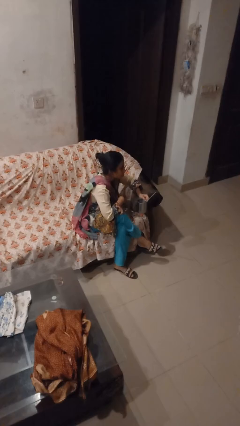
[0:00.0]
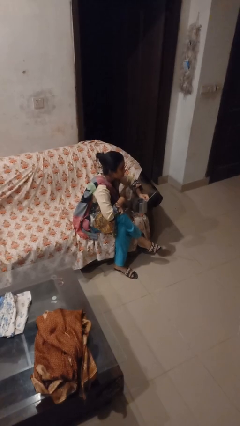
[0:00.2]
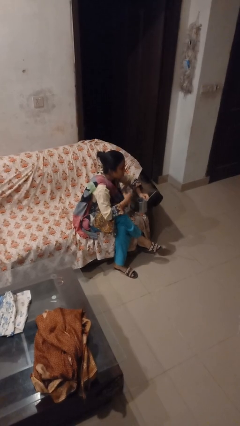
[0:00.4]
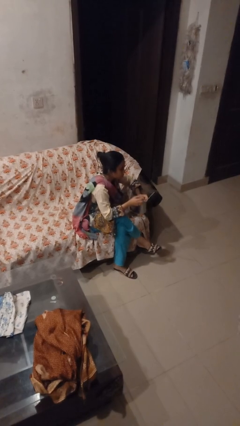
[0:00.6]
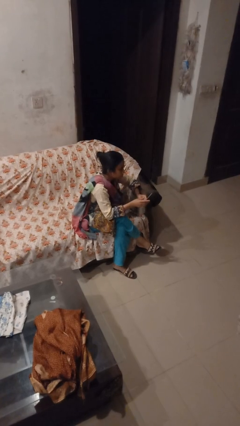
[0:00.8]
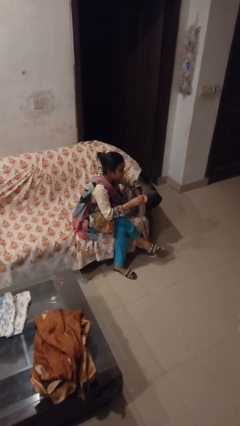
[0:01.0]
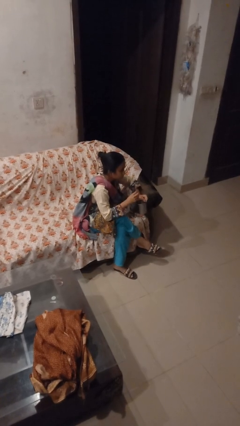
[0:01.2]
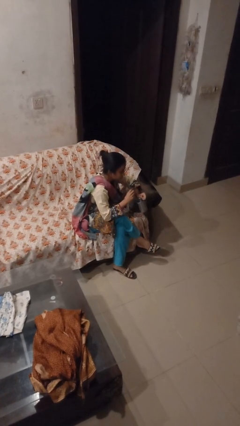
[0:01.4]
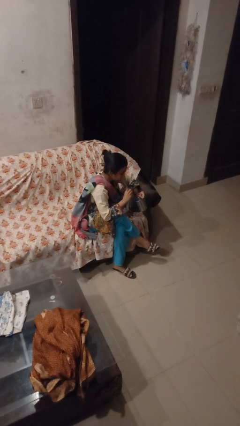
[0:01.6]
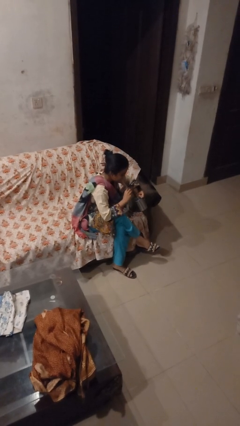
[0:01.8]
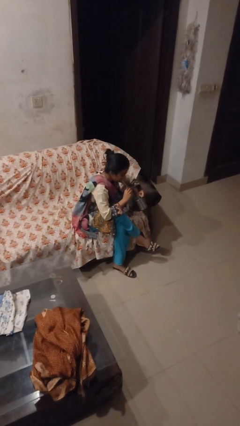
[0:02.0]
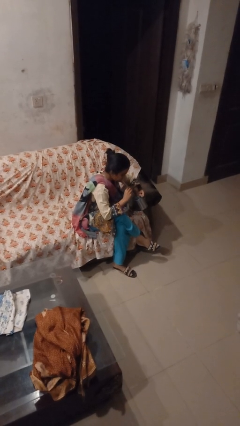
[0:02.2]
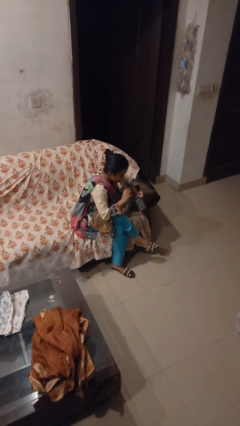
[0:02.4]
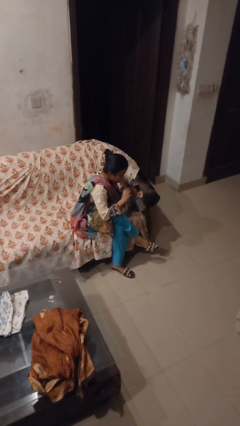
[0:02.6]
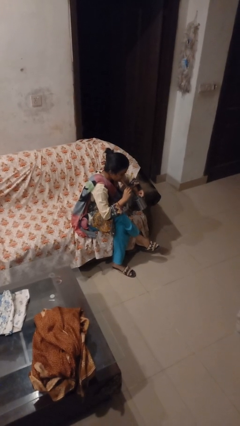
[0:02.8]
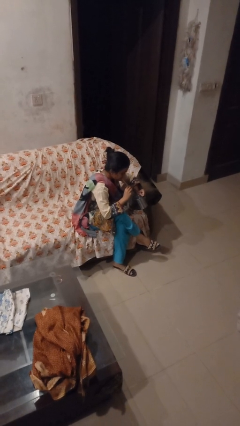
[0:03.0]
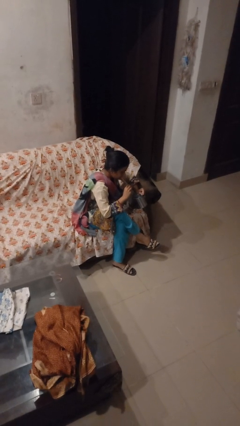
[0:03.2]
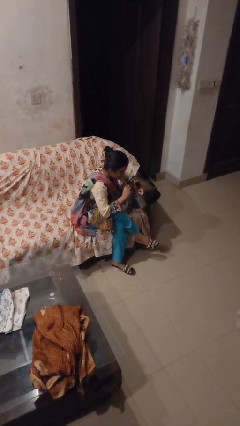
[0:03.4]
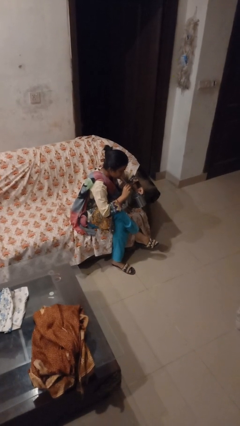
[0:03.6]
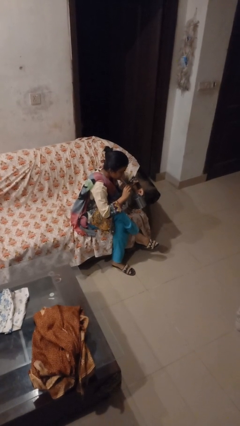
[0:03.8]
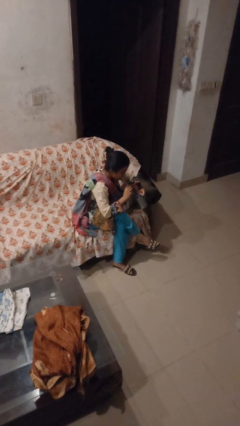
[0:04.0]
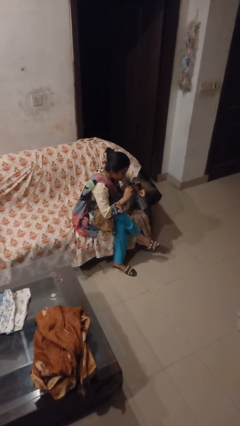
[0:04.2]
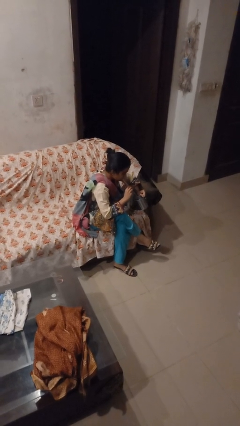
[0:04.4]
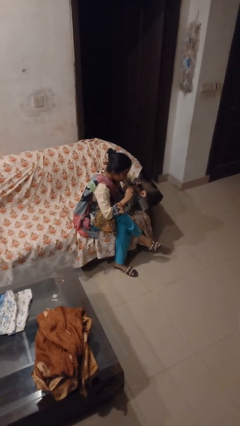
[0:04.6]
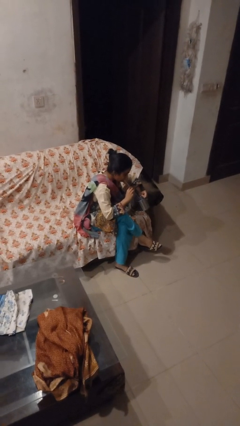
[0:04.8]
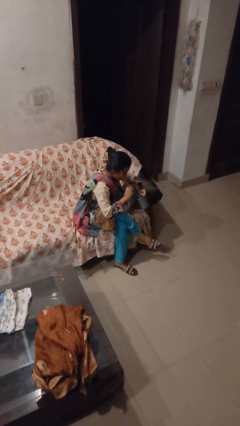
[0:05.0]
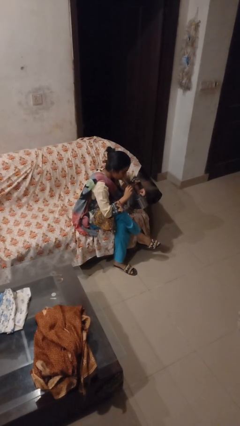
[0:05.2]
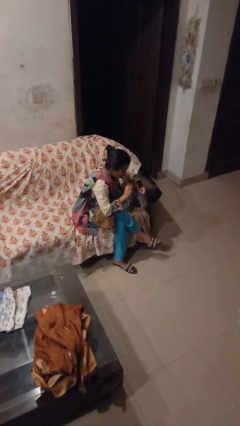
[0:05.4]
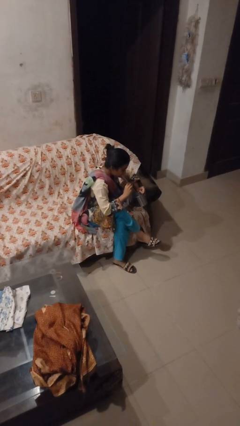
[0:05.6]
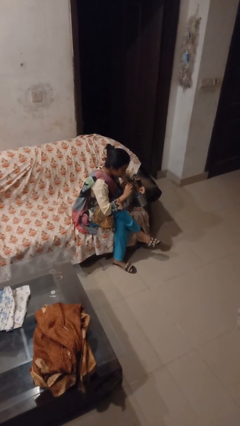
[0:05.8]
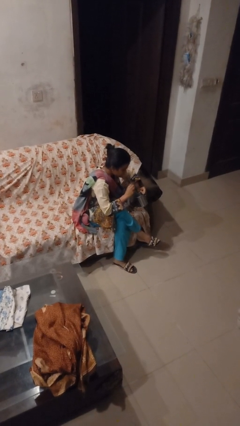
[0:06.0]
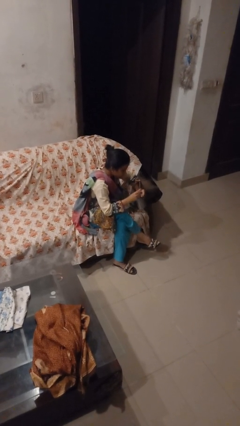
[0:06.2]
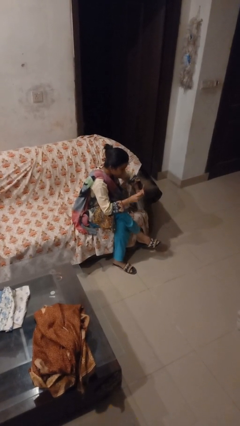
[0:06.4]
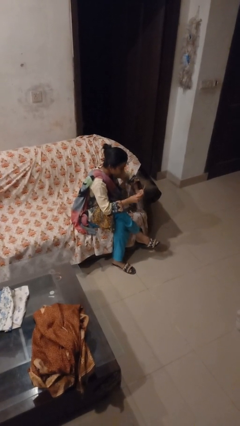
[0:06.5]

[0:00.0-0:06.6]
person drinks from straw

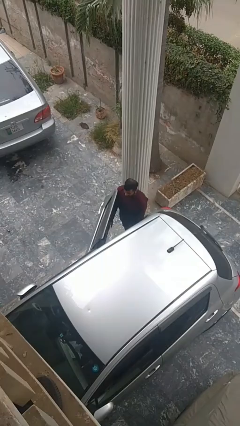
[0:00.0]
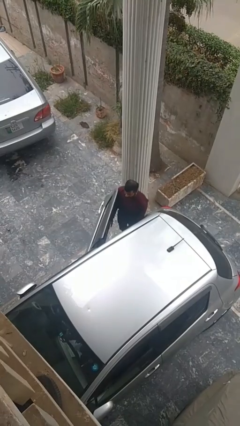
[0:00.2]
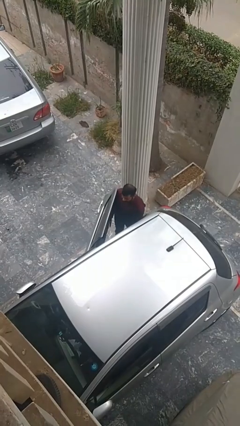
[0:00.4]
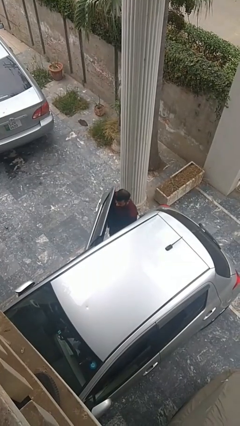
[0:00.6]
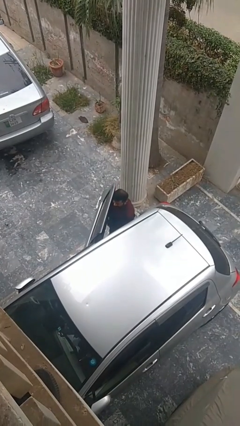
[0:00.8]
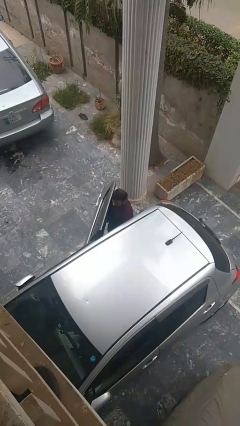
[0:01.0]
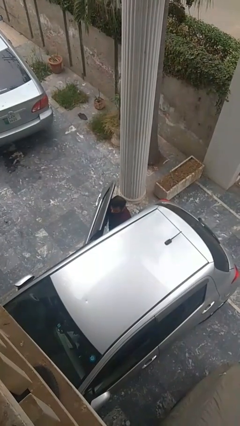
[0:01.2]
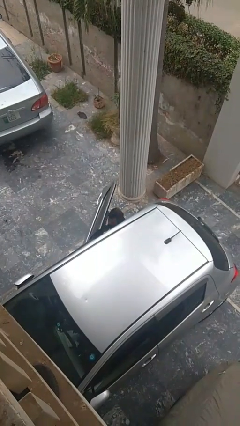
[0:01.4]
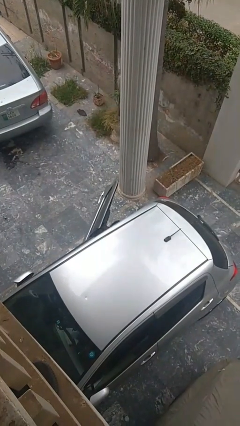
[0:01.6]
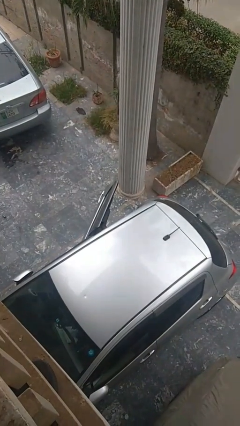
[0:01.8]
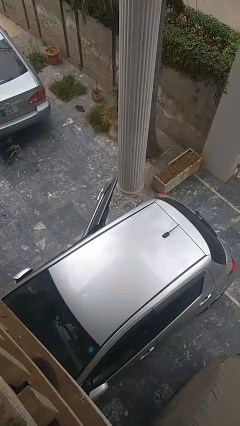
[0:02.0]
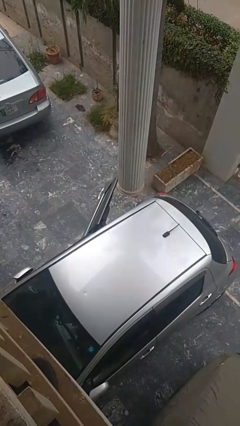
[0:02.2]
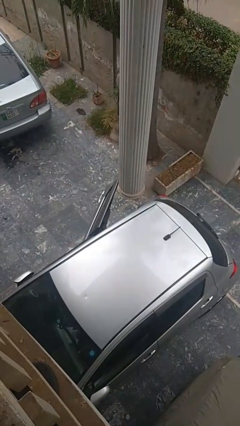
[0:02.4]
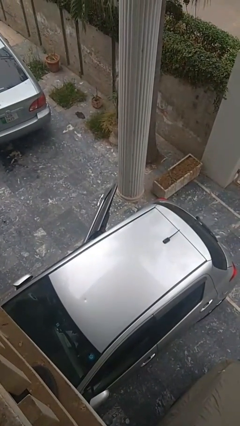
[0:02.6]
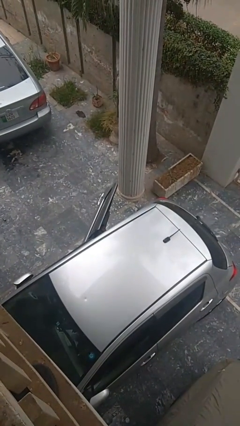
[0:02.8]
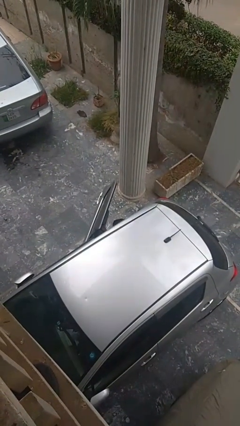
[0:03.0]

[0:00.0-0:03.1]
person enters car

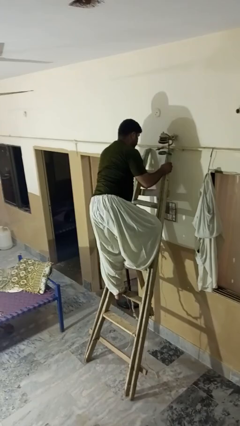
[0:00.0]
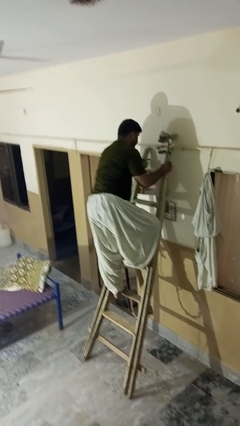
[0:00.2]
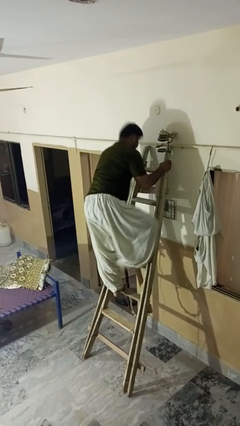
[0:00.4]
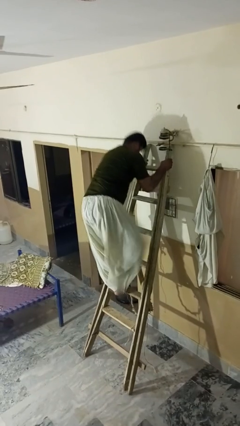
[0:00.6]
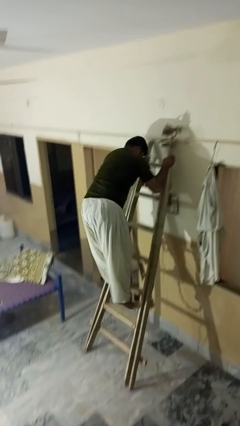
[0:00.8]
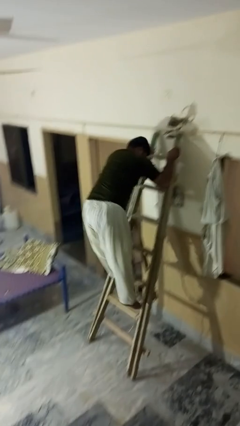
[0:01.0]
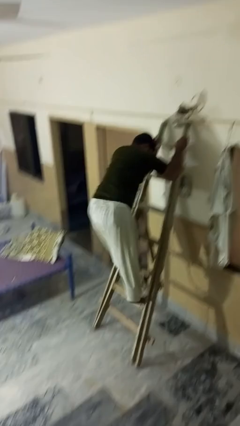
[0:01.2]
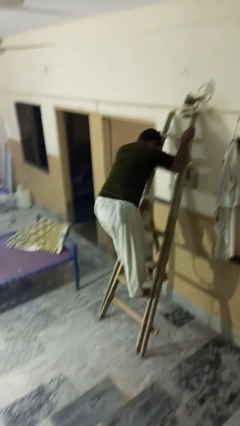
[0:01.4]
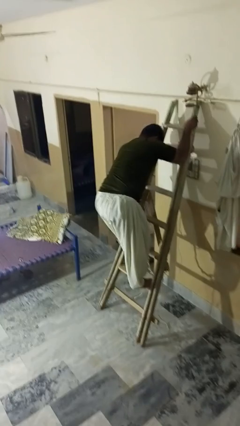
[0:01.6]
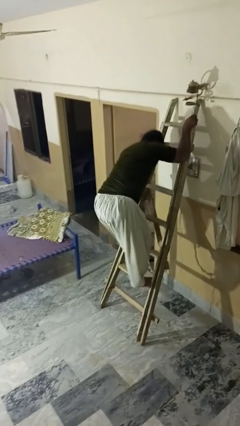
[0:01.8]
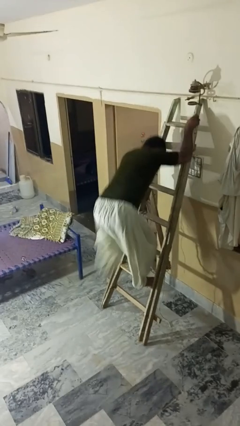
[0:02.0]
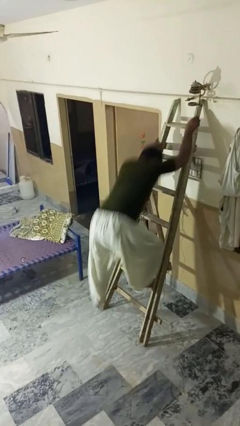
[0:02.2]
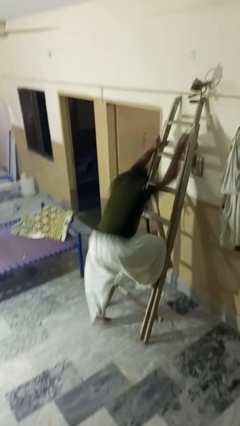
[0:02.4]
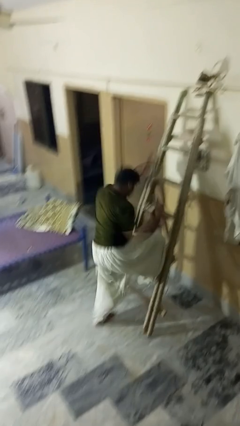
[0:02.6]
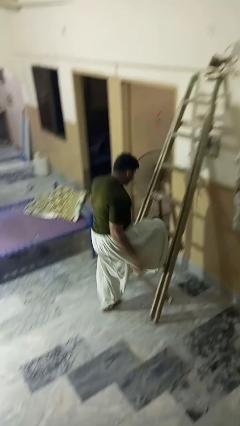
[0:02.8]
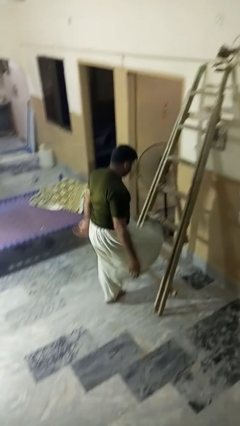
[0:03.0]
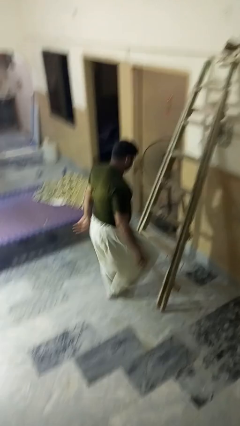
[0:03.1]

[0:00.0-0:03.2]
person climbs down ladder

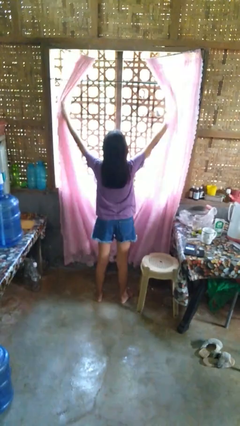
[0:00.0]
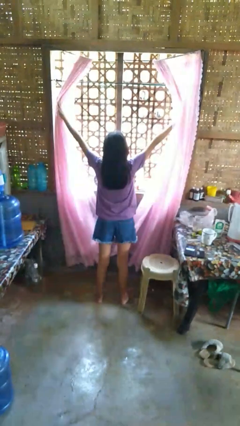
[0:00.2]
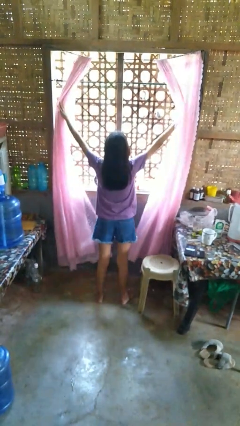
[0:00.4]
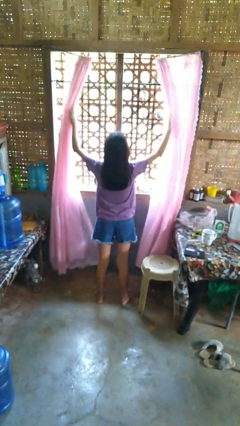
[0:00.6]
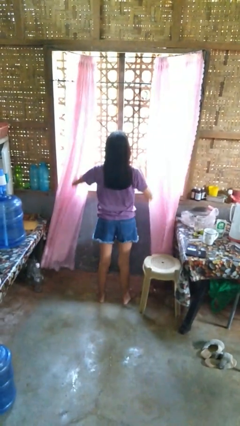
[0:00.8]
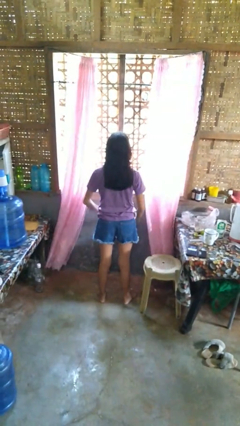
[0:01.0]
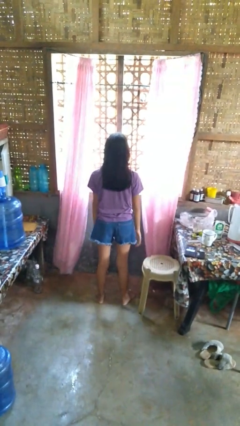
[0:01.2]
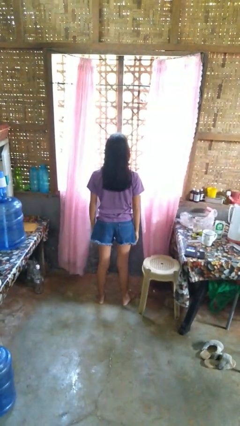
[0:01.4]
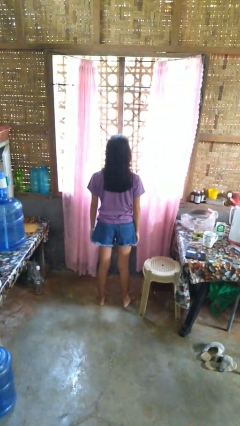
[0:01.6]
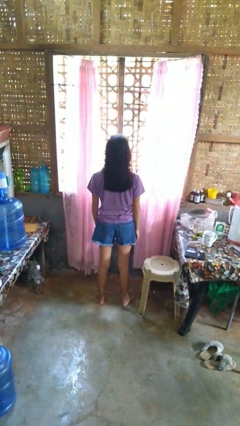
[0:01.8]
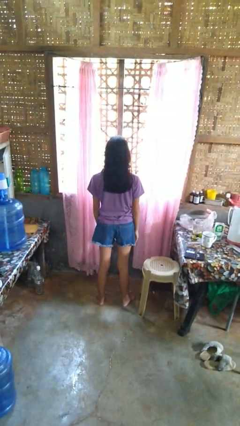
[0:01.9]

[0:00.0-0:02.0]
person opens curtains

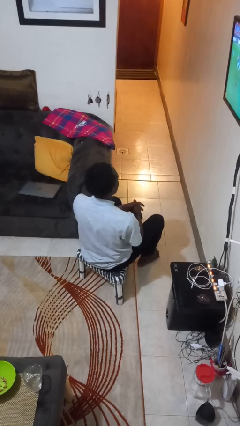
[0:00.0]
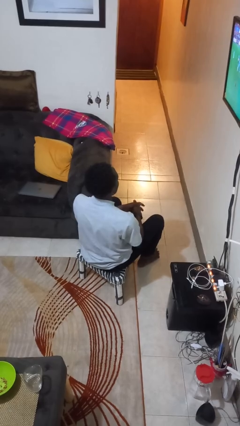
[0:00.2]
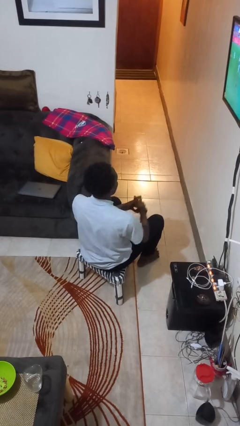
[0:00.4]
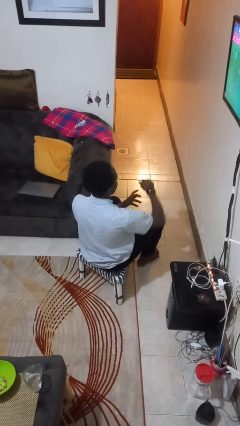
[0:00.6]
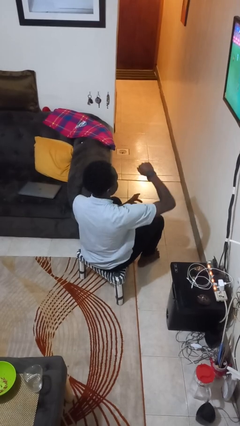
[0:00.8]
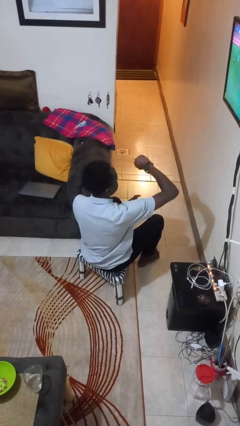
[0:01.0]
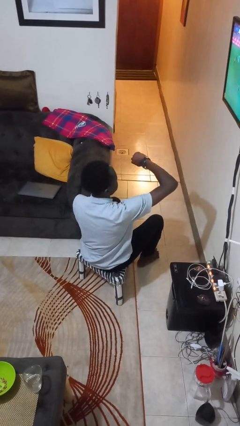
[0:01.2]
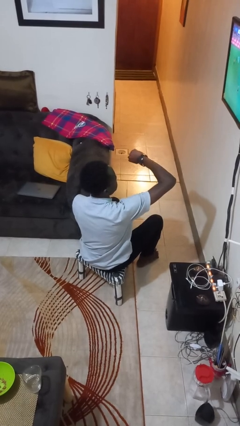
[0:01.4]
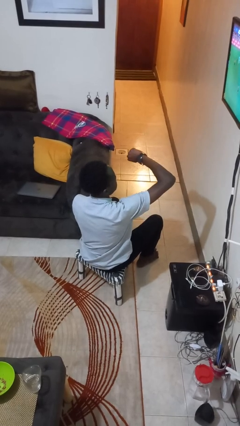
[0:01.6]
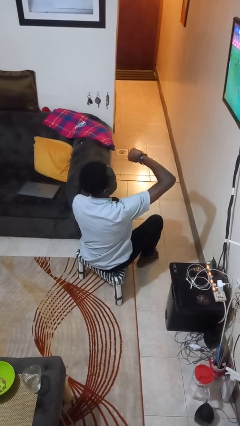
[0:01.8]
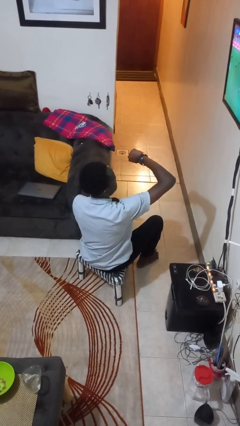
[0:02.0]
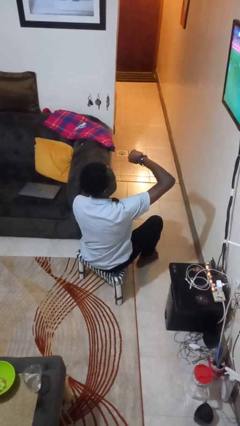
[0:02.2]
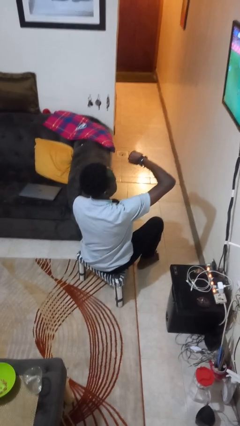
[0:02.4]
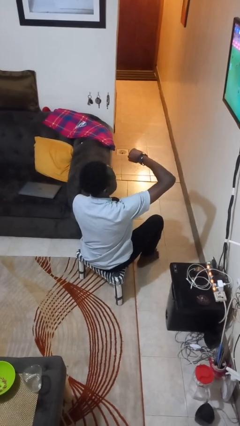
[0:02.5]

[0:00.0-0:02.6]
person looks at wristwatch
